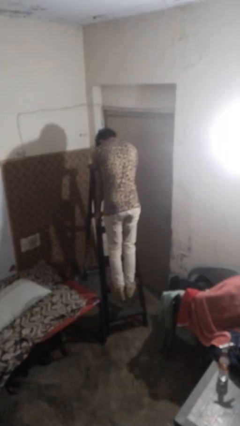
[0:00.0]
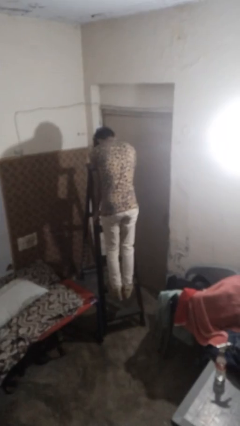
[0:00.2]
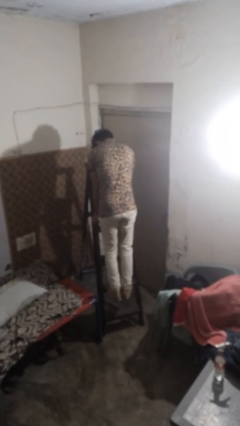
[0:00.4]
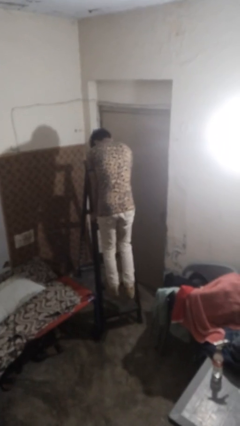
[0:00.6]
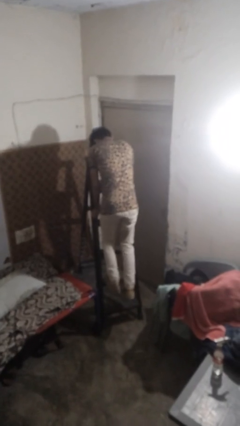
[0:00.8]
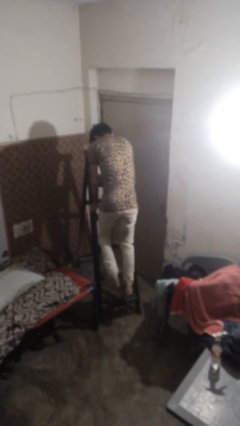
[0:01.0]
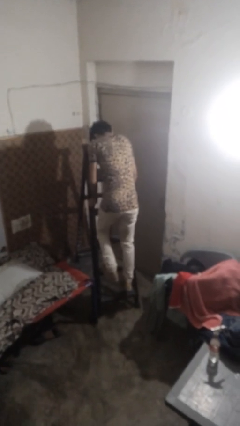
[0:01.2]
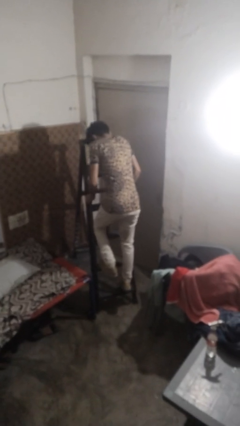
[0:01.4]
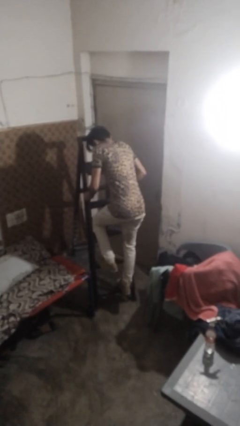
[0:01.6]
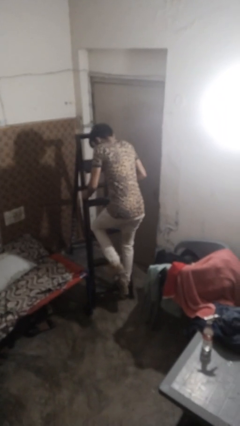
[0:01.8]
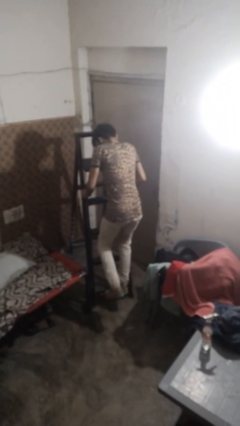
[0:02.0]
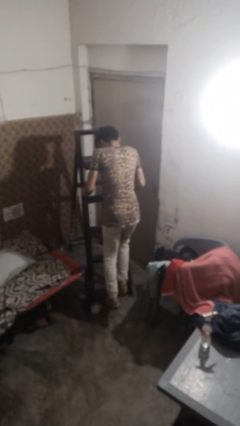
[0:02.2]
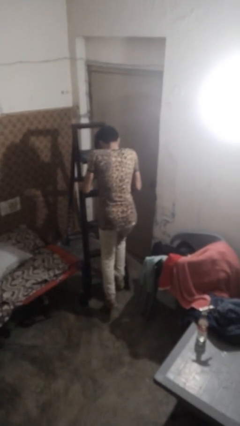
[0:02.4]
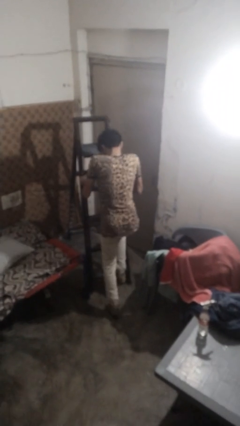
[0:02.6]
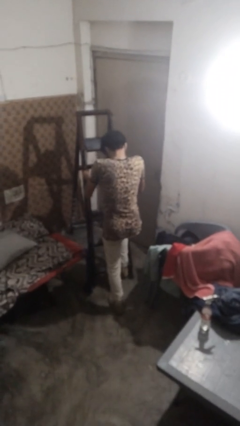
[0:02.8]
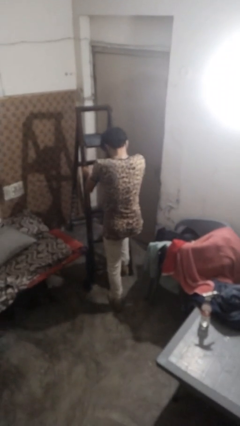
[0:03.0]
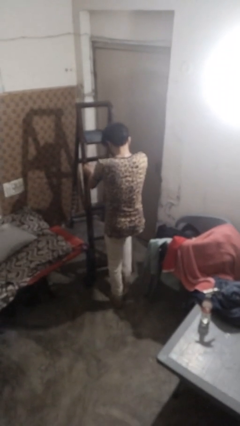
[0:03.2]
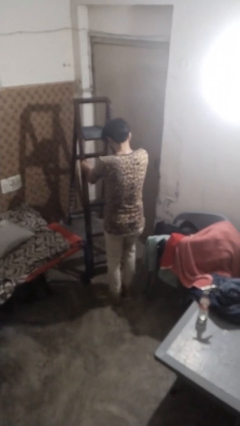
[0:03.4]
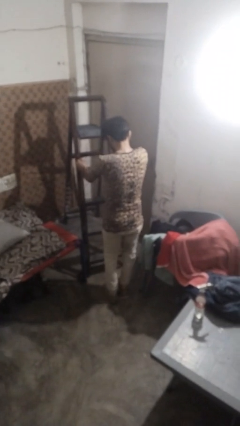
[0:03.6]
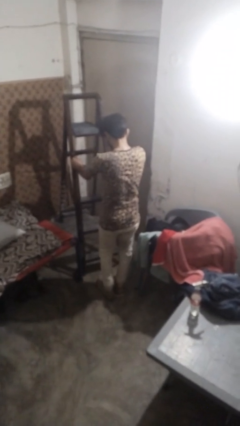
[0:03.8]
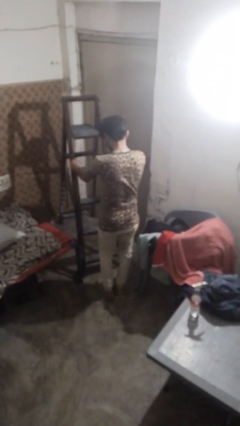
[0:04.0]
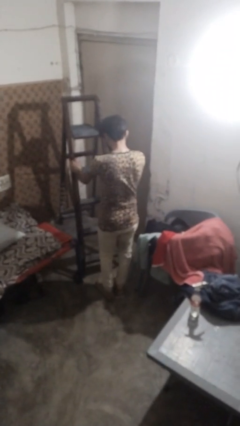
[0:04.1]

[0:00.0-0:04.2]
person climbs down ladder

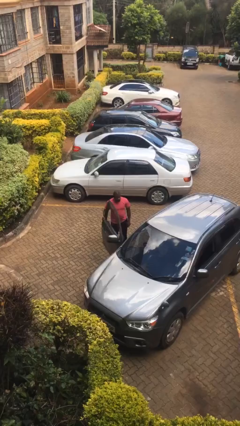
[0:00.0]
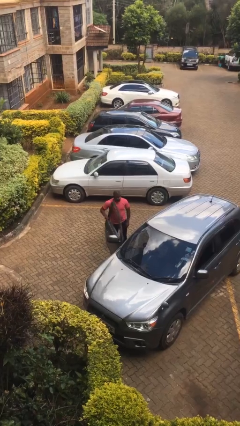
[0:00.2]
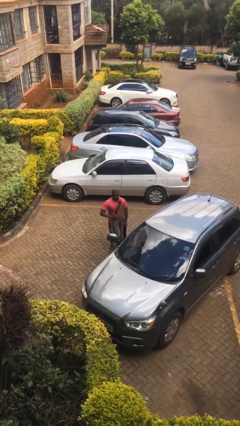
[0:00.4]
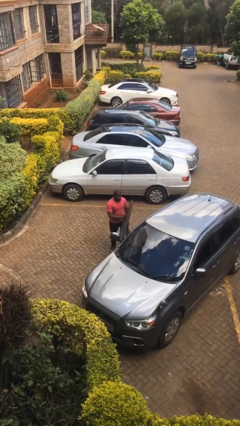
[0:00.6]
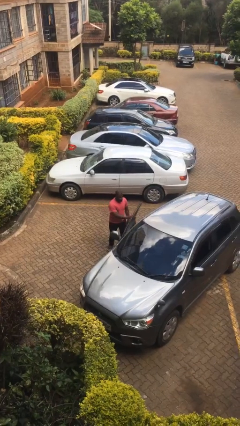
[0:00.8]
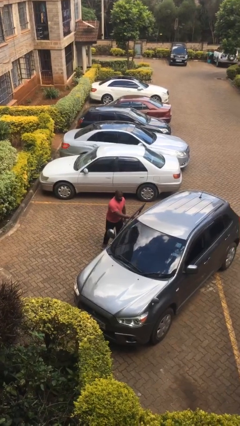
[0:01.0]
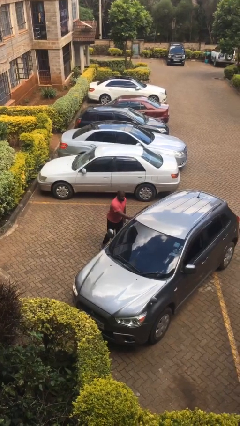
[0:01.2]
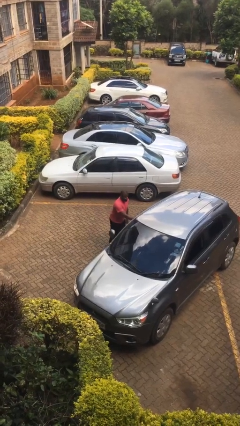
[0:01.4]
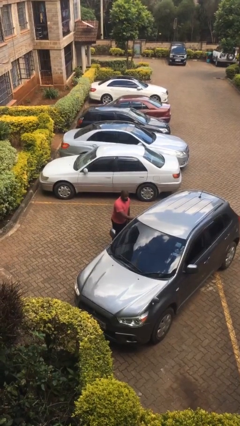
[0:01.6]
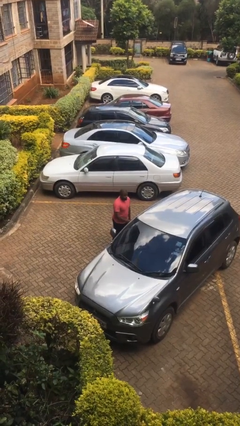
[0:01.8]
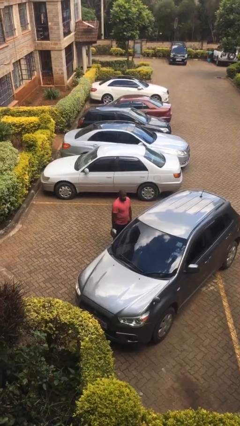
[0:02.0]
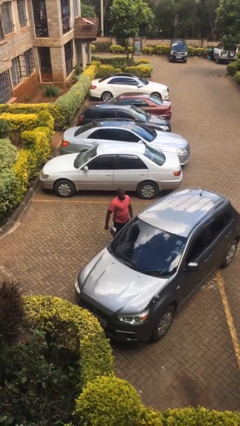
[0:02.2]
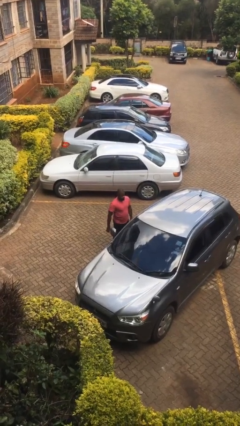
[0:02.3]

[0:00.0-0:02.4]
person closes car door

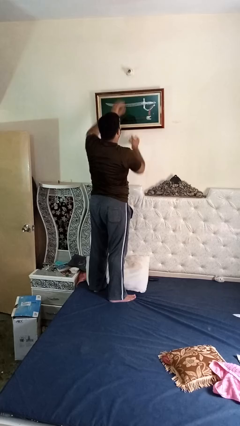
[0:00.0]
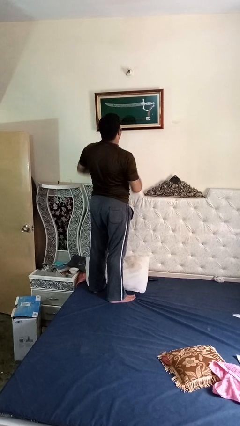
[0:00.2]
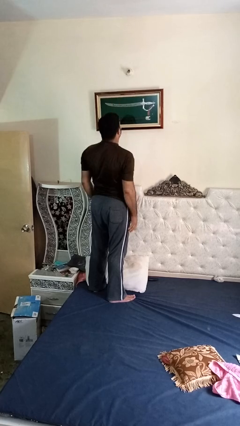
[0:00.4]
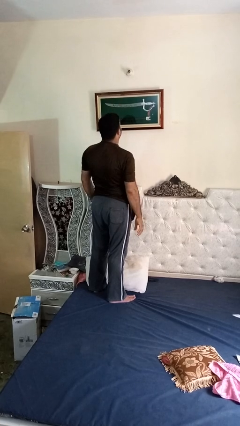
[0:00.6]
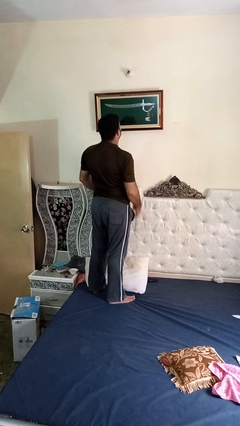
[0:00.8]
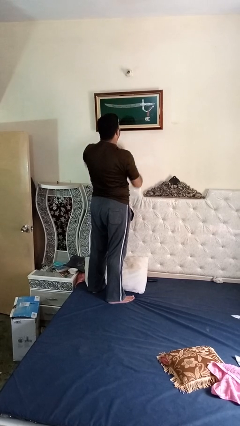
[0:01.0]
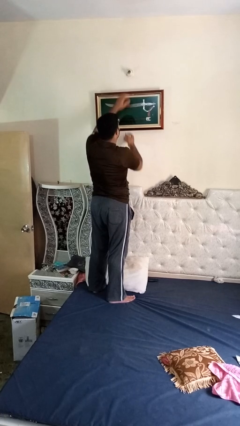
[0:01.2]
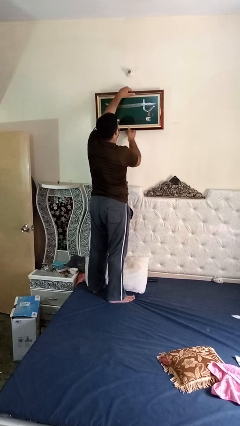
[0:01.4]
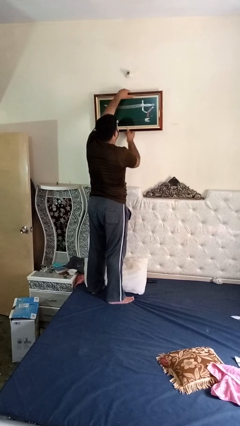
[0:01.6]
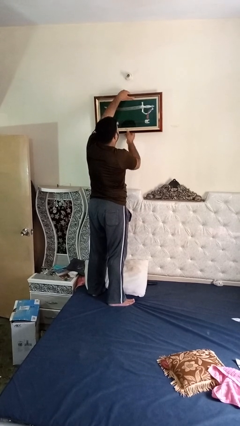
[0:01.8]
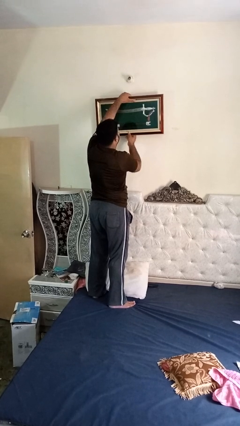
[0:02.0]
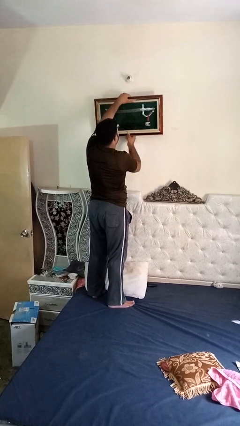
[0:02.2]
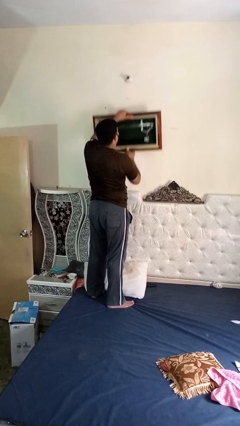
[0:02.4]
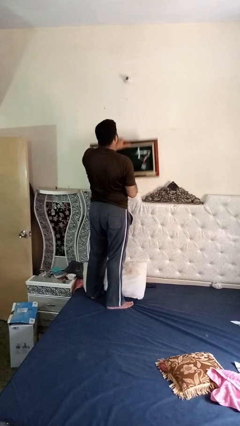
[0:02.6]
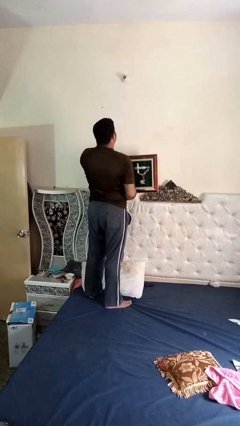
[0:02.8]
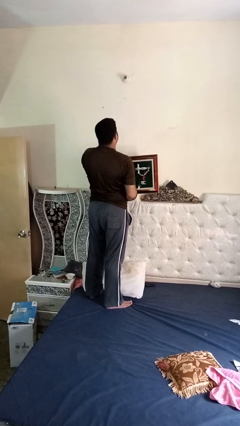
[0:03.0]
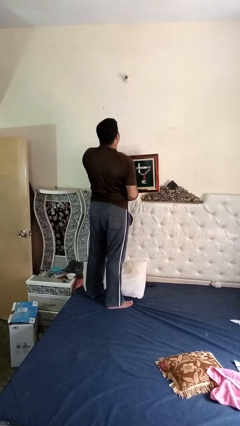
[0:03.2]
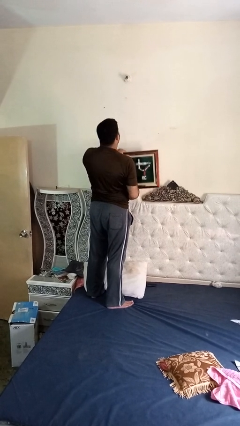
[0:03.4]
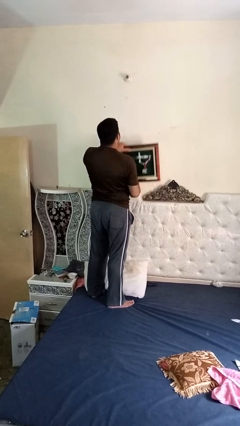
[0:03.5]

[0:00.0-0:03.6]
person takes down picture frame

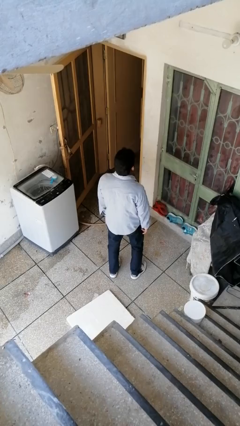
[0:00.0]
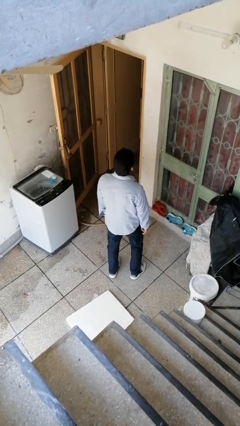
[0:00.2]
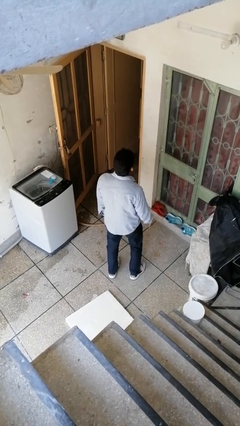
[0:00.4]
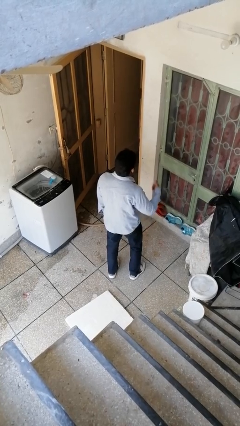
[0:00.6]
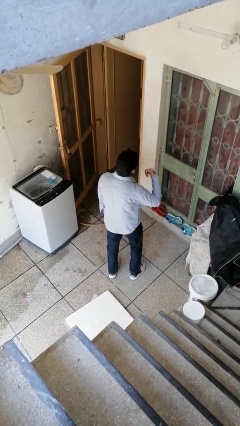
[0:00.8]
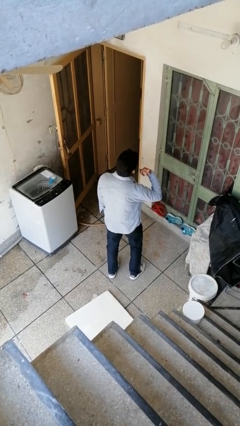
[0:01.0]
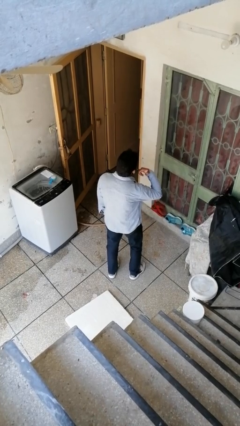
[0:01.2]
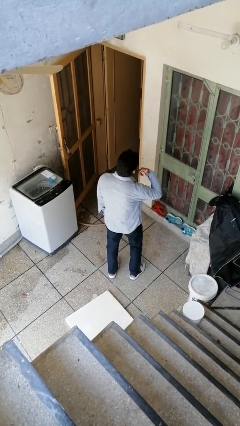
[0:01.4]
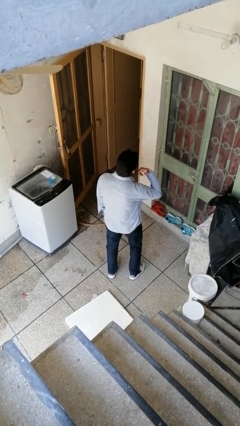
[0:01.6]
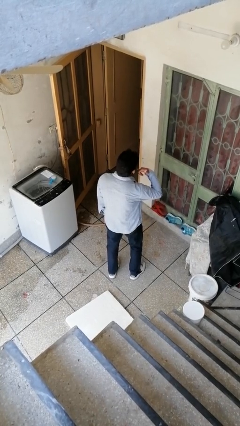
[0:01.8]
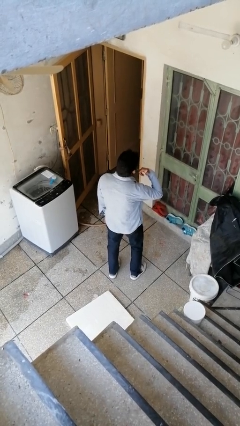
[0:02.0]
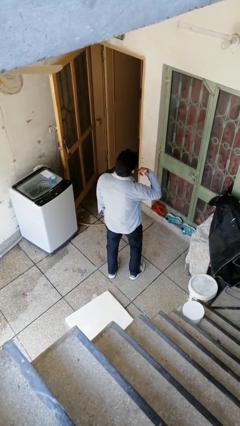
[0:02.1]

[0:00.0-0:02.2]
person gestures call me

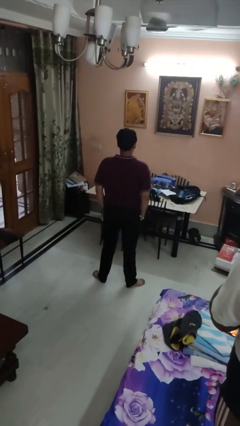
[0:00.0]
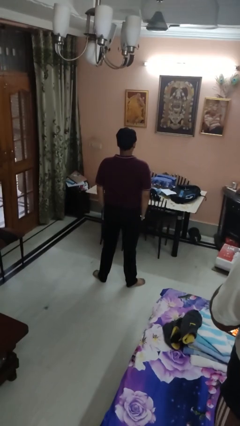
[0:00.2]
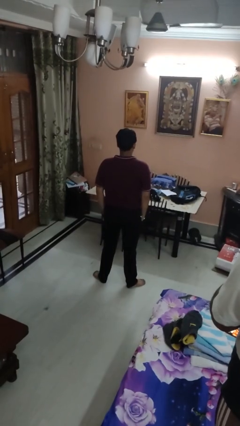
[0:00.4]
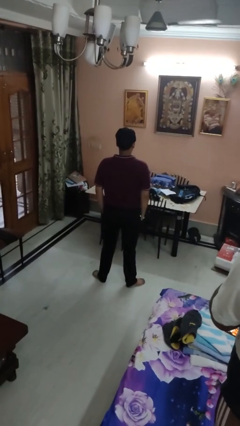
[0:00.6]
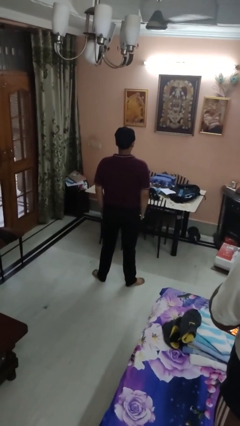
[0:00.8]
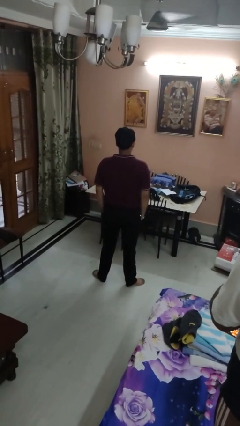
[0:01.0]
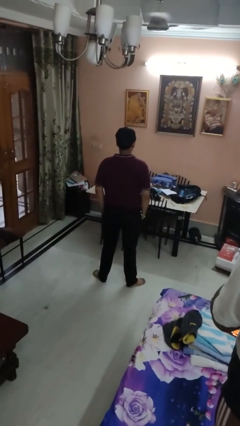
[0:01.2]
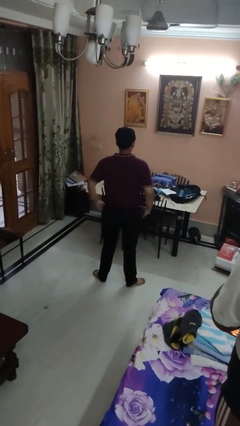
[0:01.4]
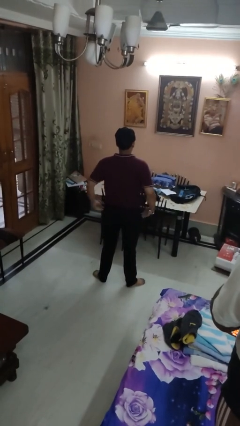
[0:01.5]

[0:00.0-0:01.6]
person puts hands in back pockets

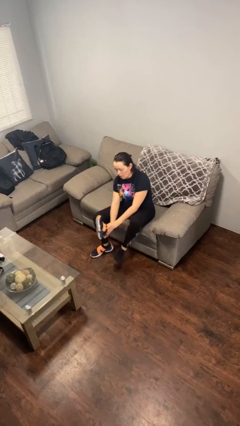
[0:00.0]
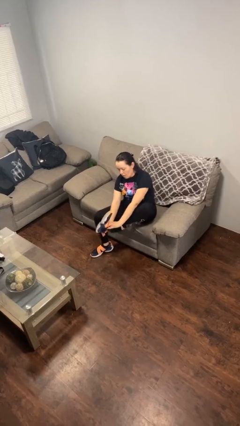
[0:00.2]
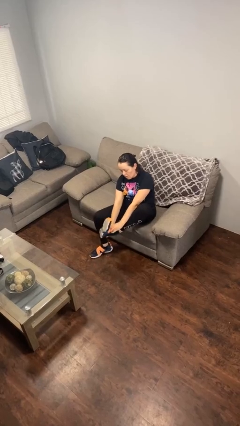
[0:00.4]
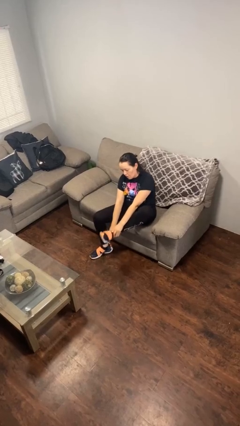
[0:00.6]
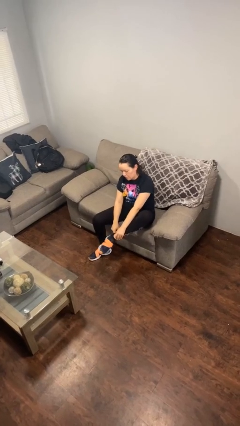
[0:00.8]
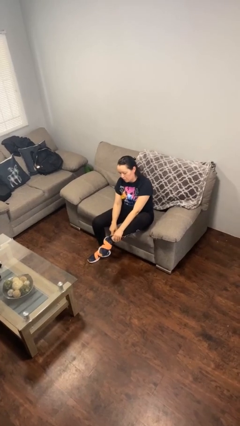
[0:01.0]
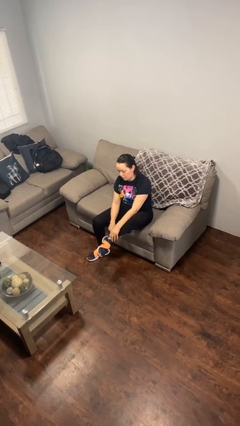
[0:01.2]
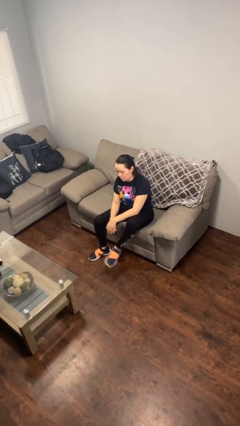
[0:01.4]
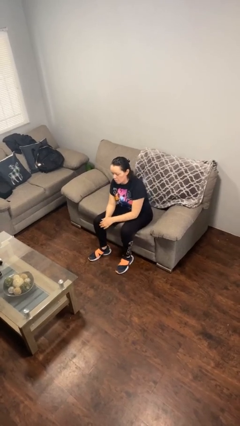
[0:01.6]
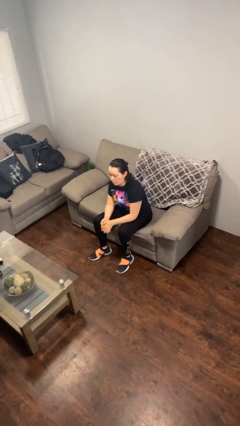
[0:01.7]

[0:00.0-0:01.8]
person puts on shoes

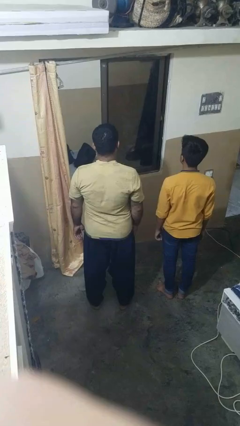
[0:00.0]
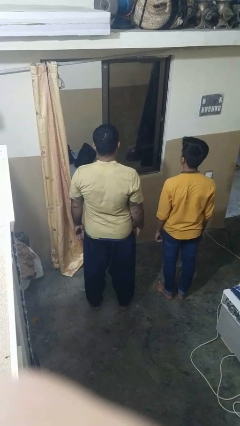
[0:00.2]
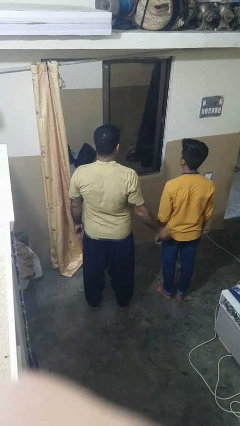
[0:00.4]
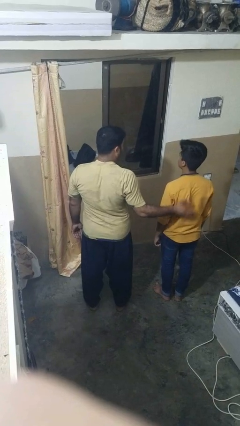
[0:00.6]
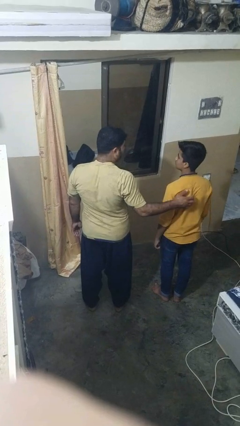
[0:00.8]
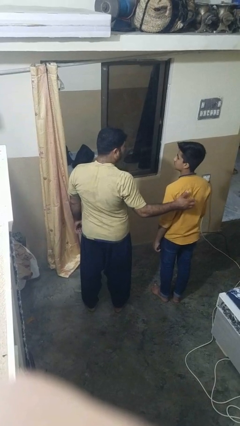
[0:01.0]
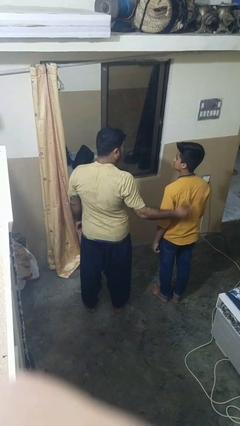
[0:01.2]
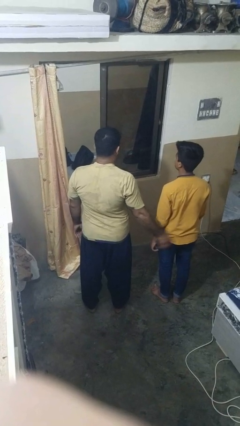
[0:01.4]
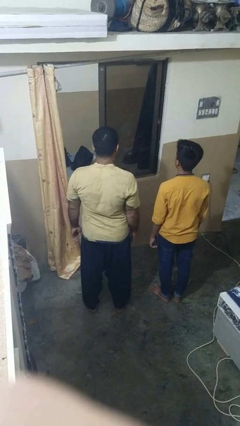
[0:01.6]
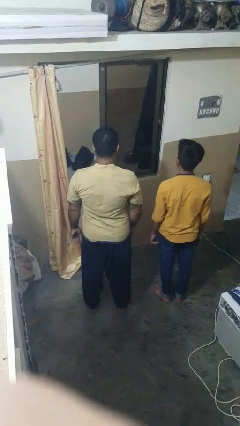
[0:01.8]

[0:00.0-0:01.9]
person touches back of person
